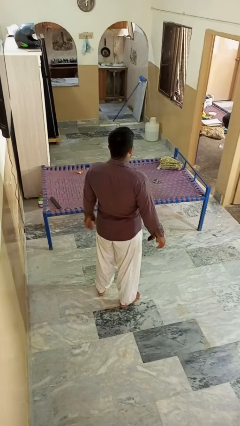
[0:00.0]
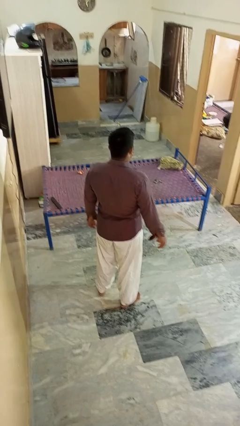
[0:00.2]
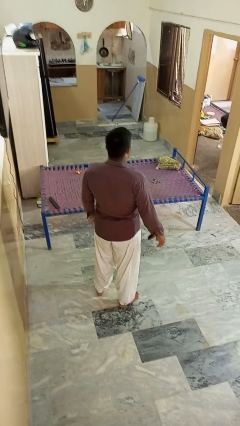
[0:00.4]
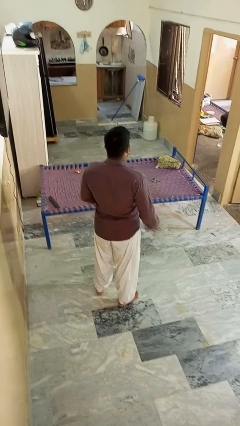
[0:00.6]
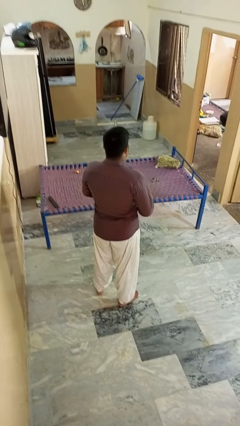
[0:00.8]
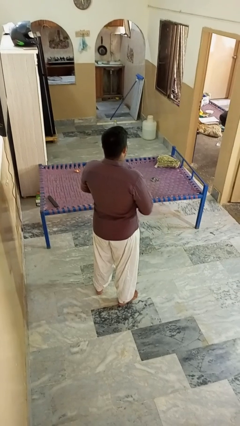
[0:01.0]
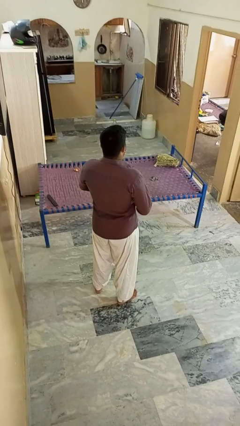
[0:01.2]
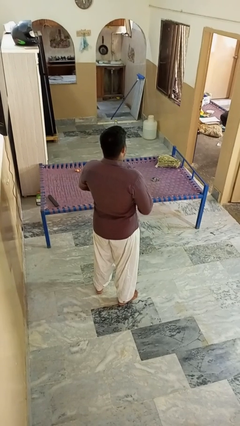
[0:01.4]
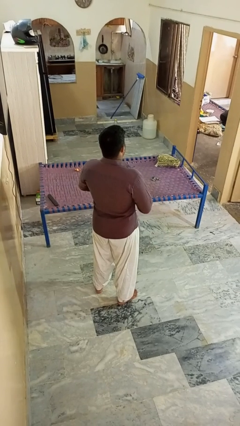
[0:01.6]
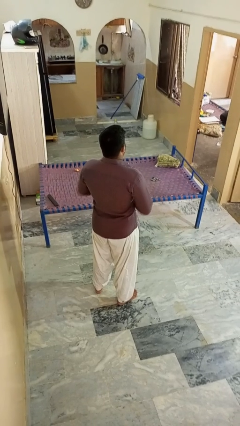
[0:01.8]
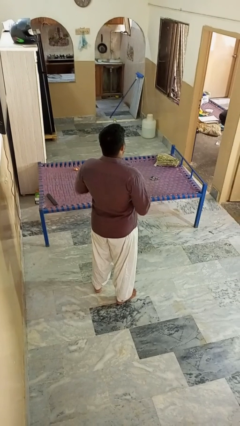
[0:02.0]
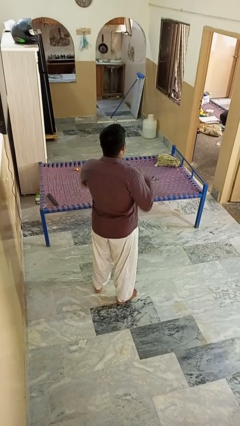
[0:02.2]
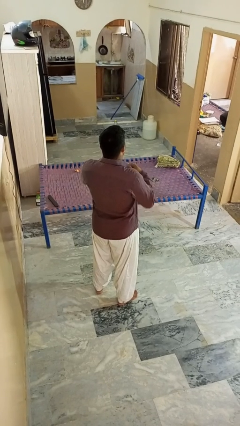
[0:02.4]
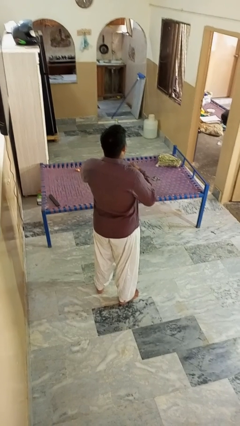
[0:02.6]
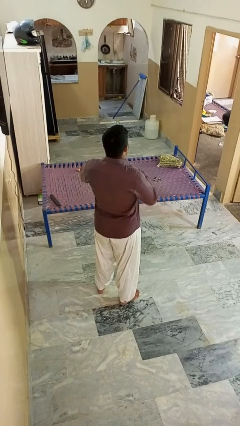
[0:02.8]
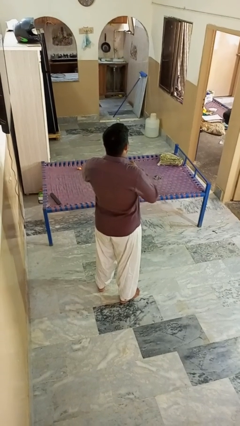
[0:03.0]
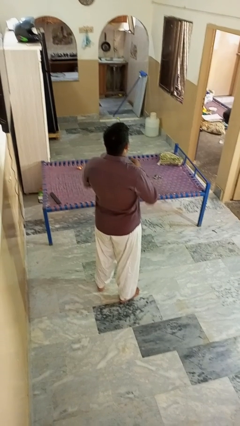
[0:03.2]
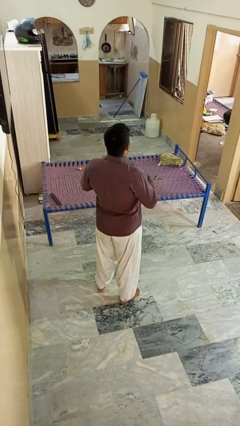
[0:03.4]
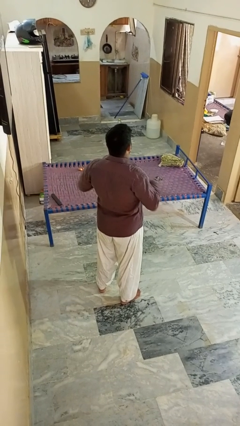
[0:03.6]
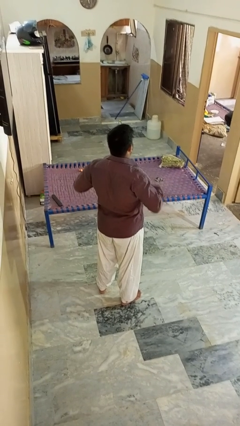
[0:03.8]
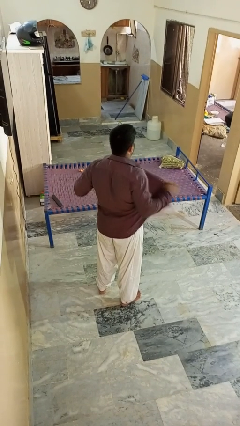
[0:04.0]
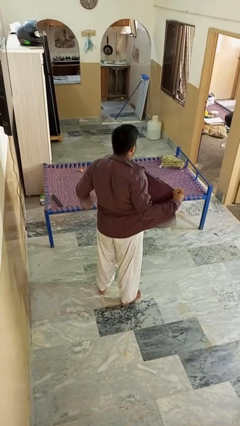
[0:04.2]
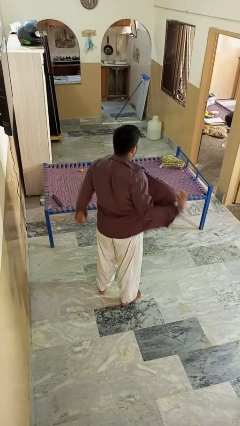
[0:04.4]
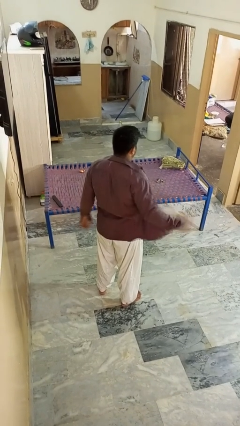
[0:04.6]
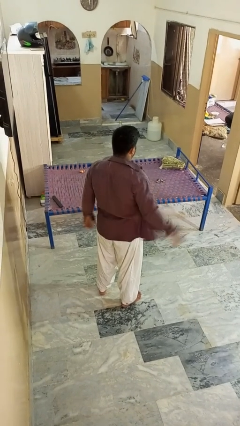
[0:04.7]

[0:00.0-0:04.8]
person unbuttons shirt

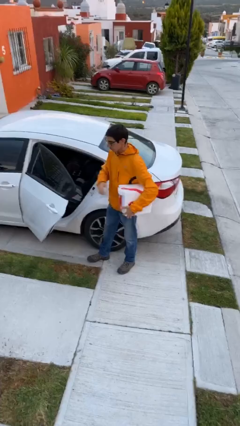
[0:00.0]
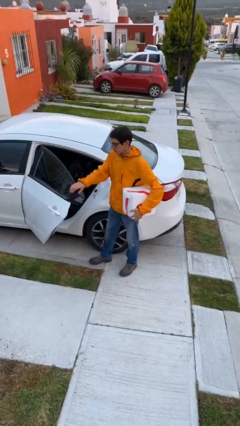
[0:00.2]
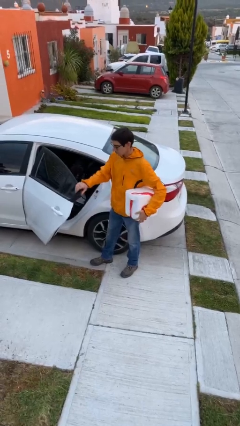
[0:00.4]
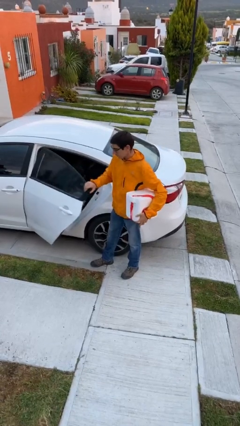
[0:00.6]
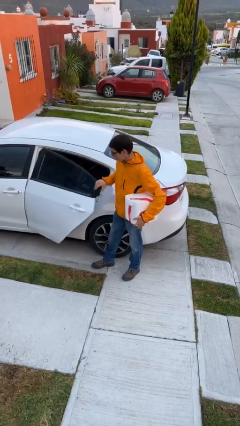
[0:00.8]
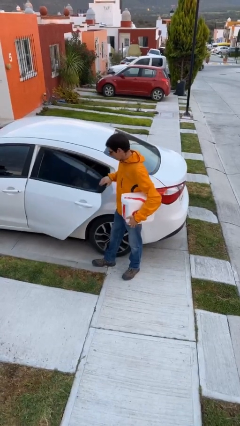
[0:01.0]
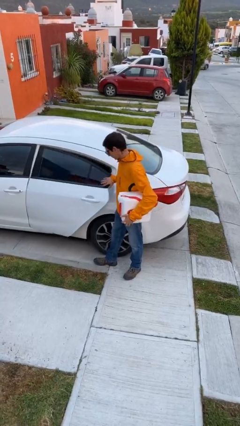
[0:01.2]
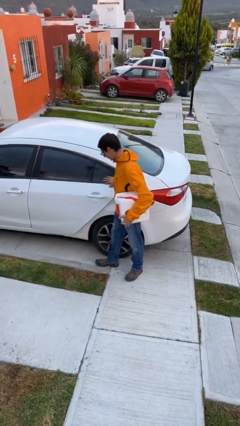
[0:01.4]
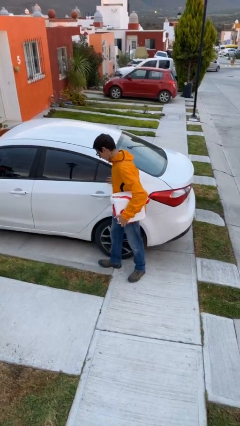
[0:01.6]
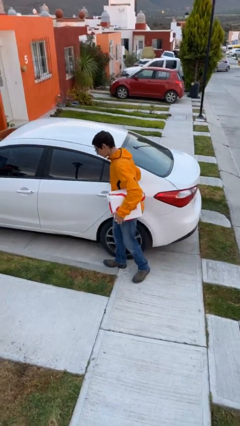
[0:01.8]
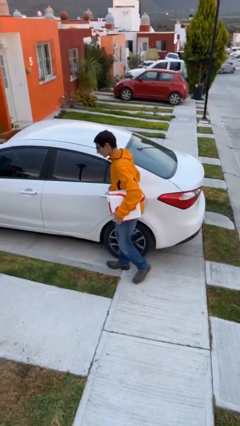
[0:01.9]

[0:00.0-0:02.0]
person closes car door

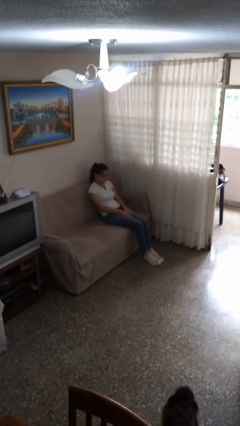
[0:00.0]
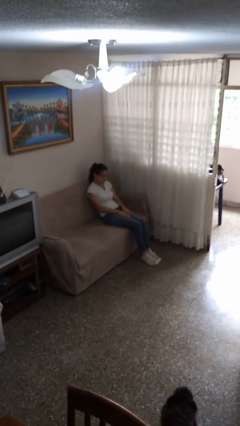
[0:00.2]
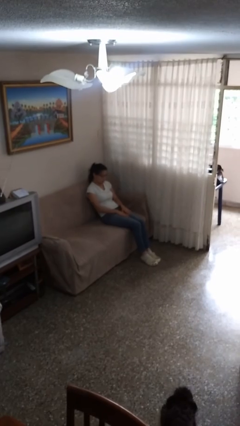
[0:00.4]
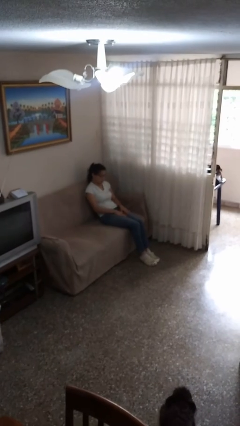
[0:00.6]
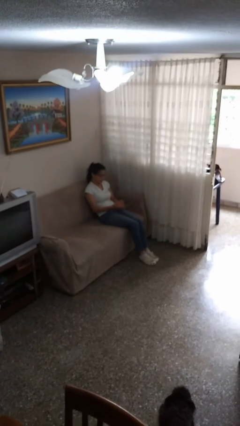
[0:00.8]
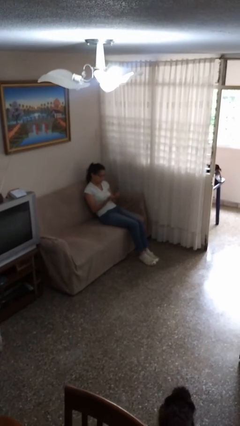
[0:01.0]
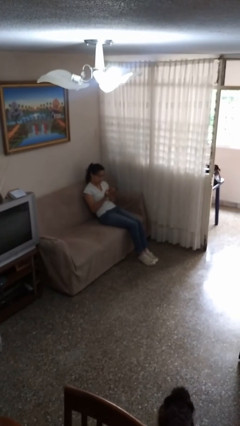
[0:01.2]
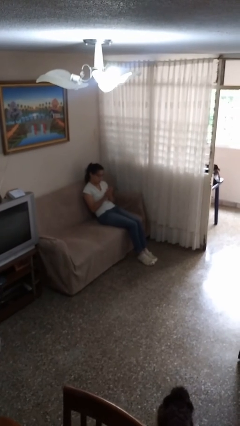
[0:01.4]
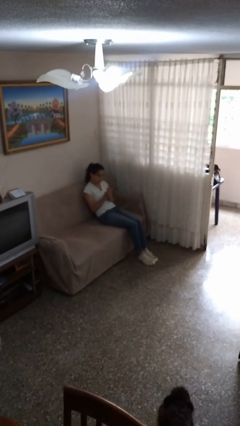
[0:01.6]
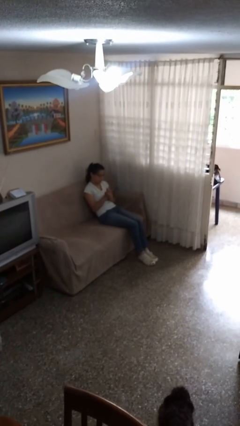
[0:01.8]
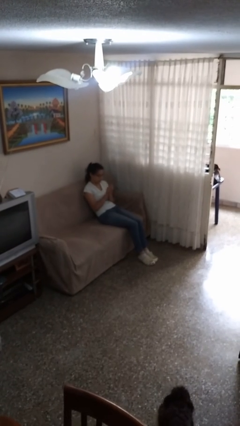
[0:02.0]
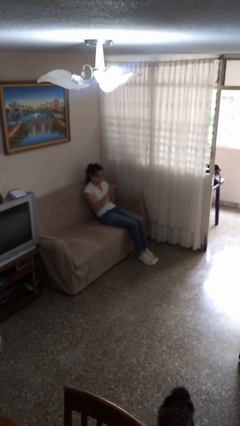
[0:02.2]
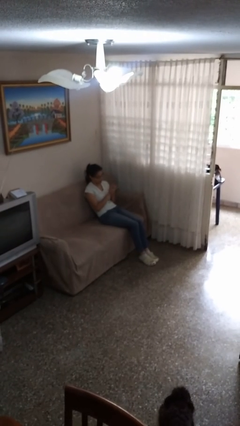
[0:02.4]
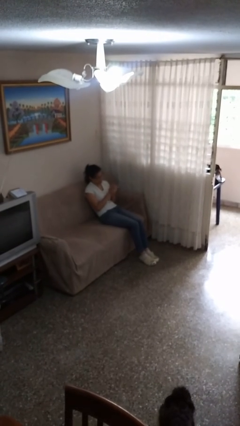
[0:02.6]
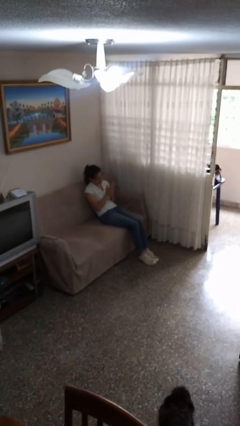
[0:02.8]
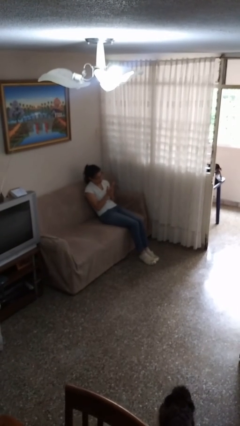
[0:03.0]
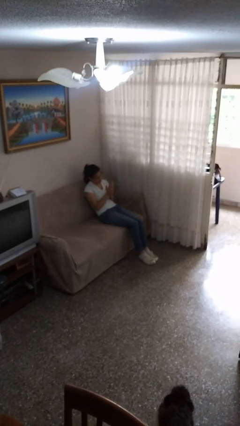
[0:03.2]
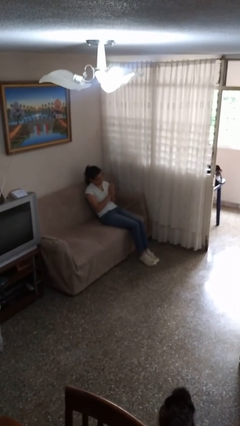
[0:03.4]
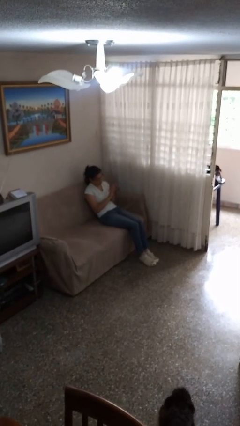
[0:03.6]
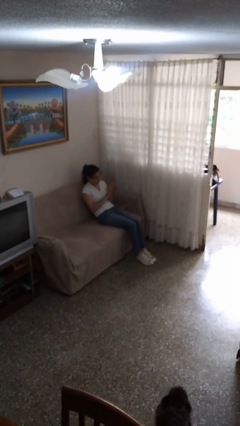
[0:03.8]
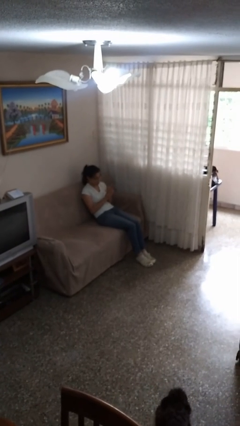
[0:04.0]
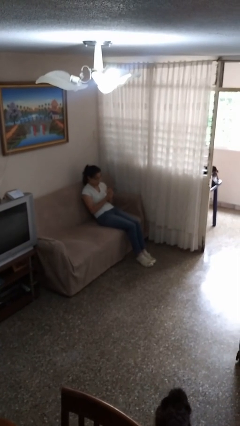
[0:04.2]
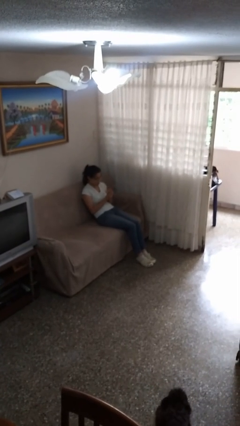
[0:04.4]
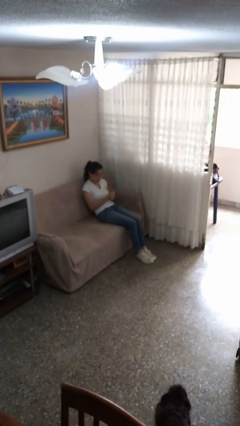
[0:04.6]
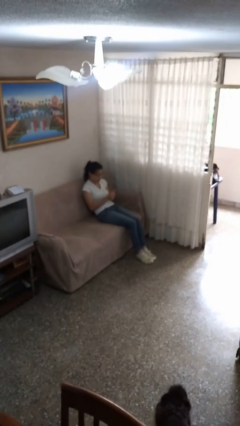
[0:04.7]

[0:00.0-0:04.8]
person looks at hands in lap

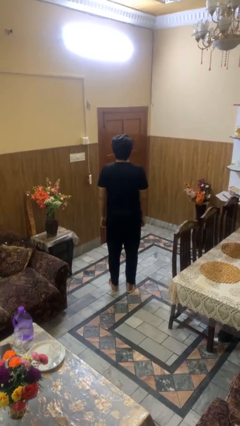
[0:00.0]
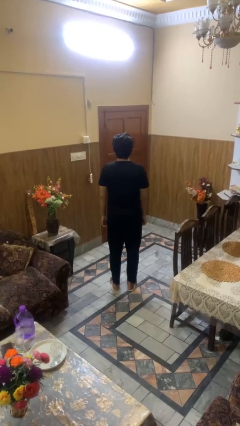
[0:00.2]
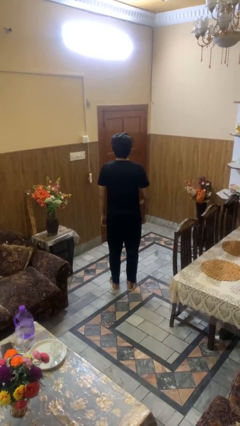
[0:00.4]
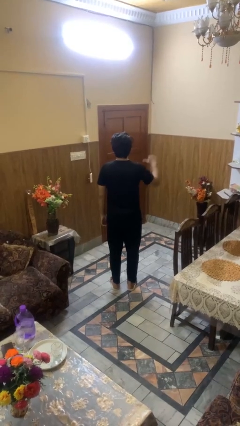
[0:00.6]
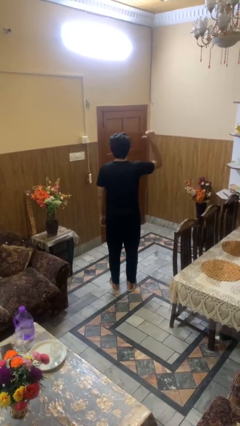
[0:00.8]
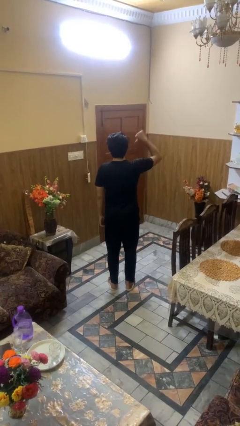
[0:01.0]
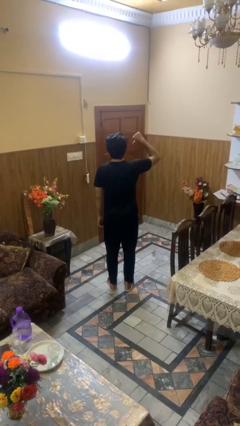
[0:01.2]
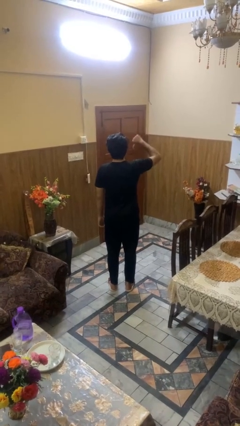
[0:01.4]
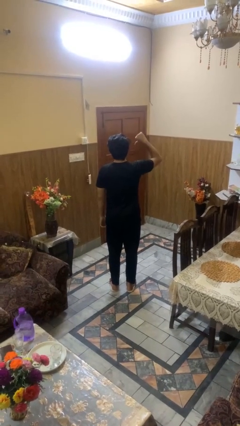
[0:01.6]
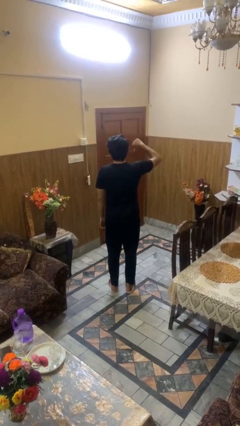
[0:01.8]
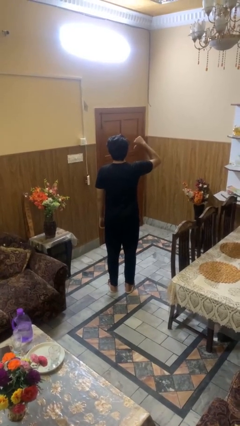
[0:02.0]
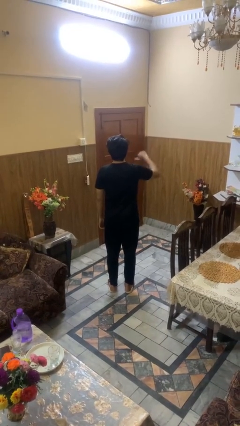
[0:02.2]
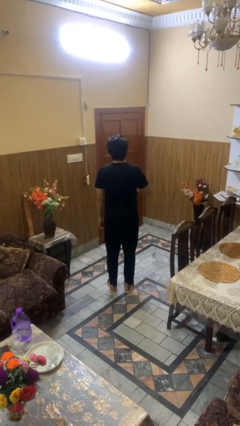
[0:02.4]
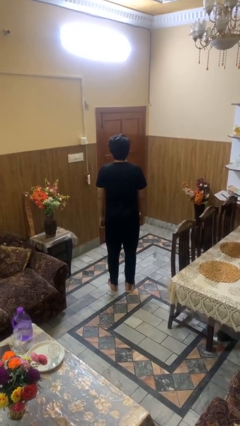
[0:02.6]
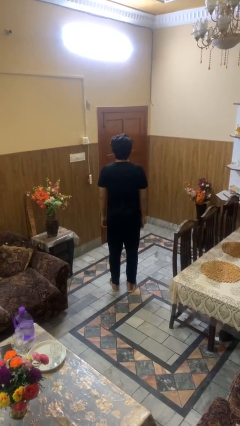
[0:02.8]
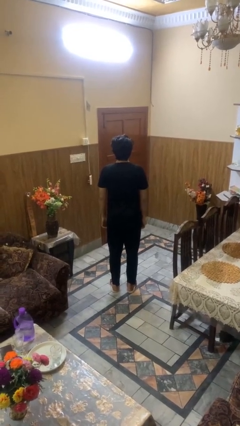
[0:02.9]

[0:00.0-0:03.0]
person gestures thumbs down

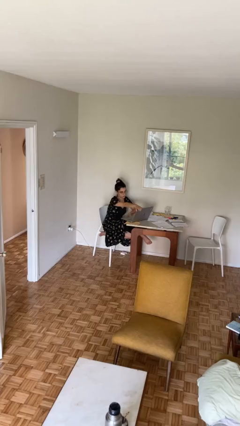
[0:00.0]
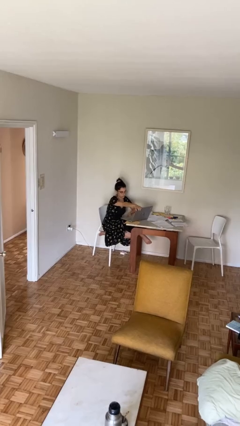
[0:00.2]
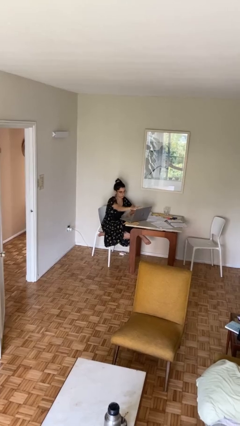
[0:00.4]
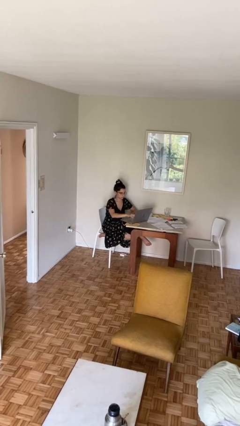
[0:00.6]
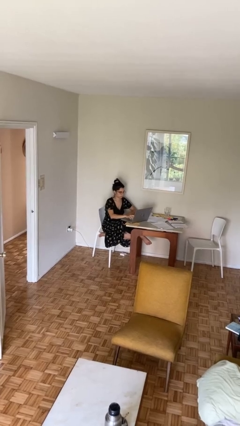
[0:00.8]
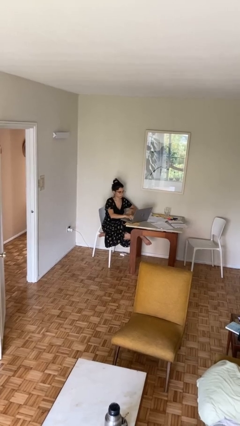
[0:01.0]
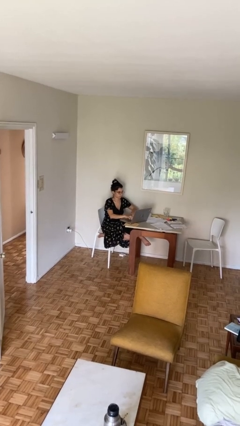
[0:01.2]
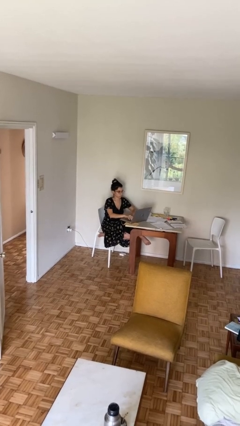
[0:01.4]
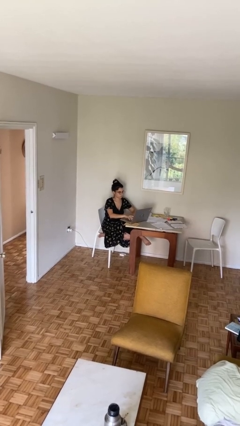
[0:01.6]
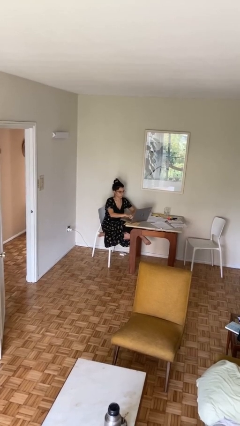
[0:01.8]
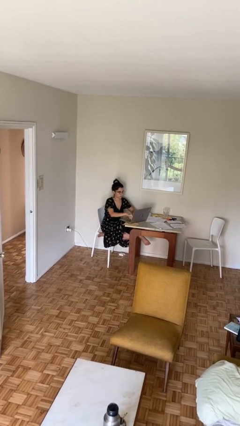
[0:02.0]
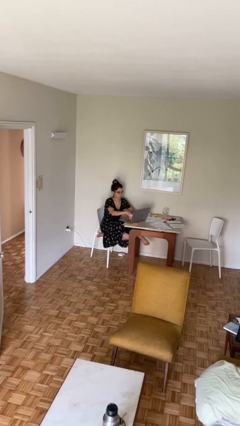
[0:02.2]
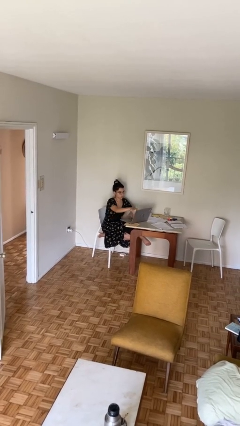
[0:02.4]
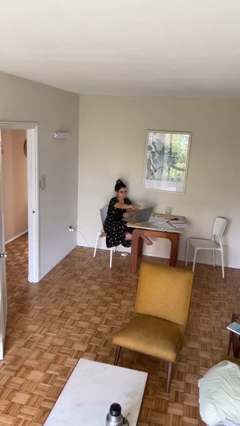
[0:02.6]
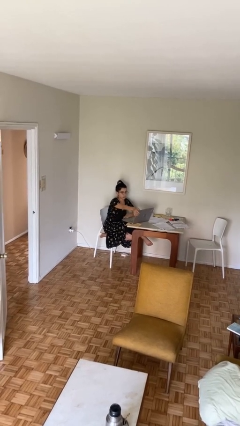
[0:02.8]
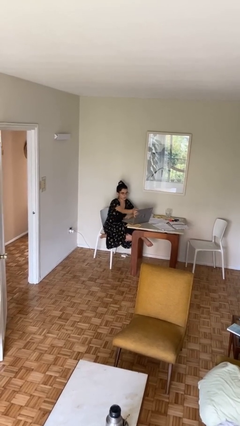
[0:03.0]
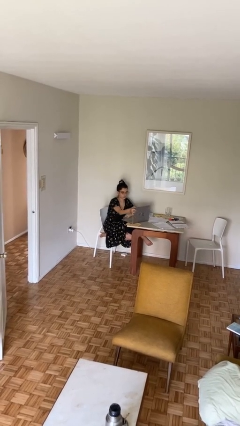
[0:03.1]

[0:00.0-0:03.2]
person interacts with laptop
